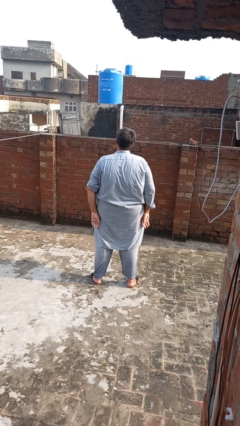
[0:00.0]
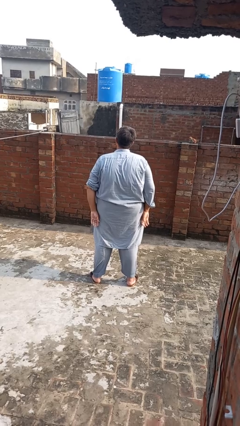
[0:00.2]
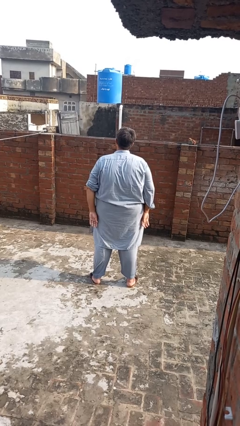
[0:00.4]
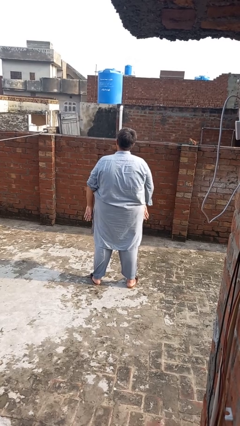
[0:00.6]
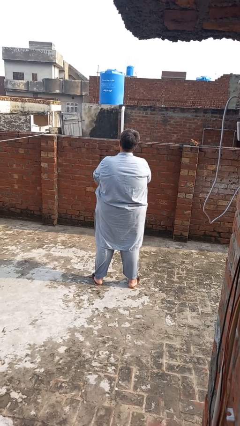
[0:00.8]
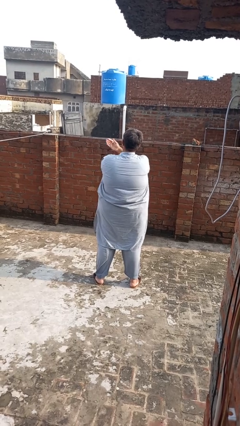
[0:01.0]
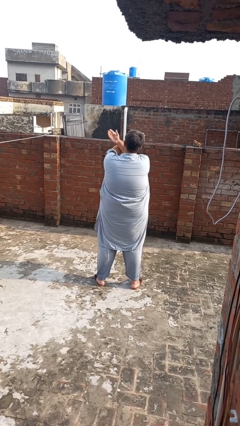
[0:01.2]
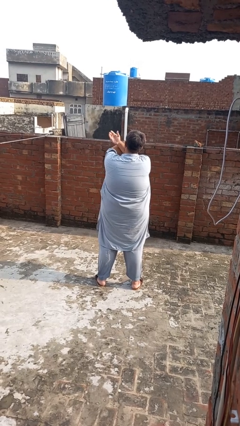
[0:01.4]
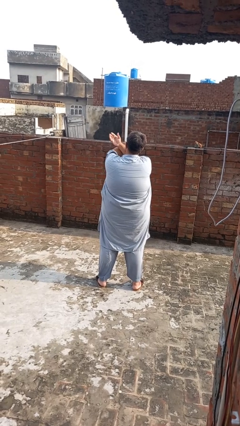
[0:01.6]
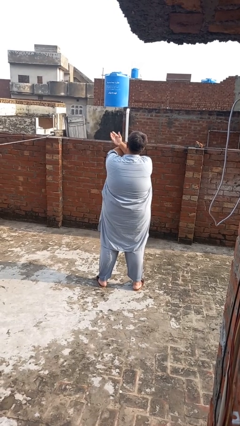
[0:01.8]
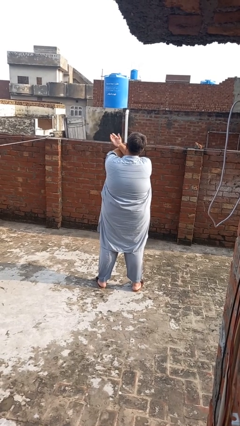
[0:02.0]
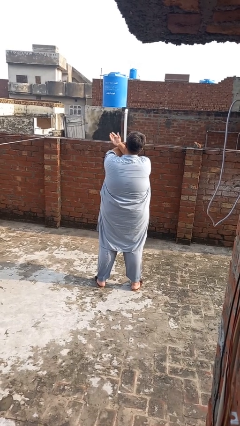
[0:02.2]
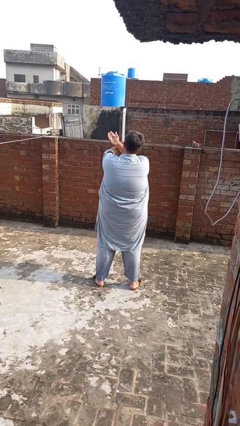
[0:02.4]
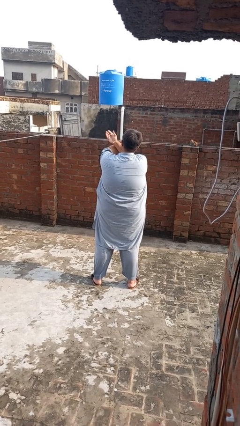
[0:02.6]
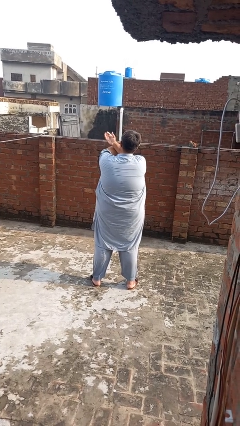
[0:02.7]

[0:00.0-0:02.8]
person gestures arms x

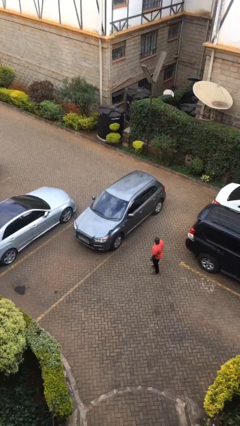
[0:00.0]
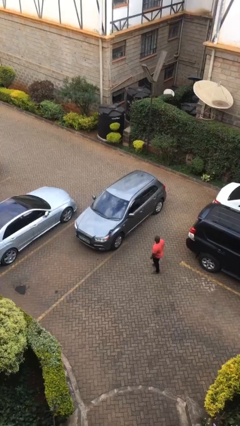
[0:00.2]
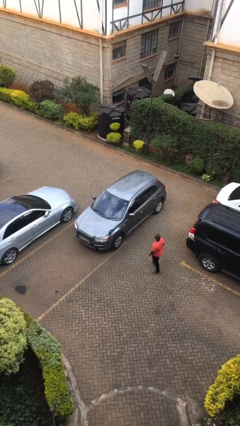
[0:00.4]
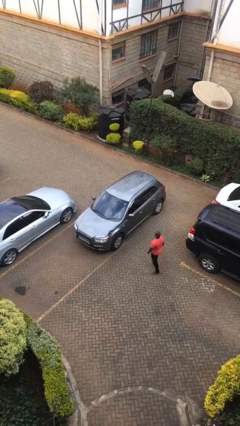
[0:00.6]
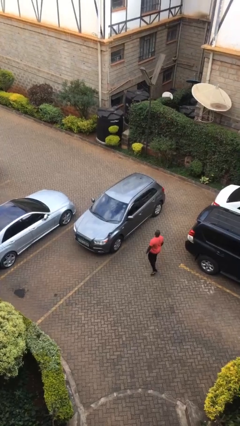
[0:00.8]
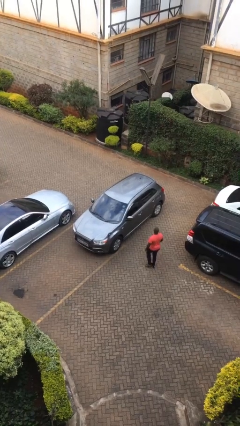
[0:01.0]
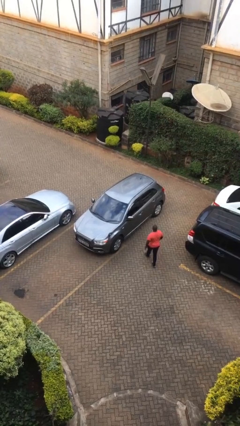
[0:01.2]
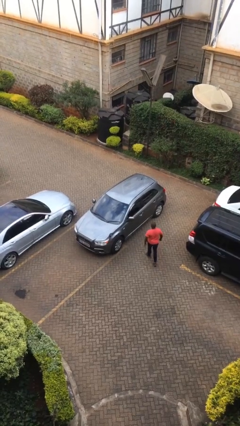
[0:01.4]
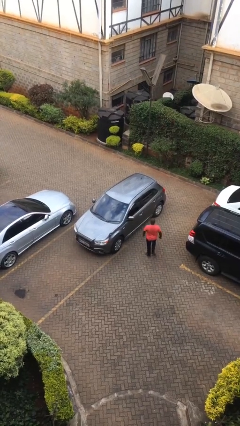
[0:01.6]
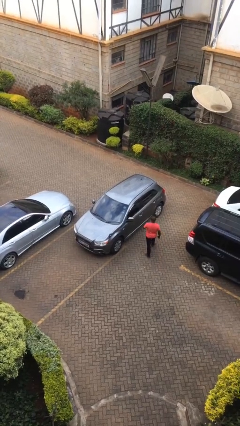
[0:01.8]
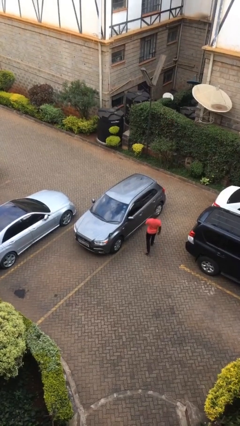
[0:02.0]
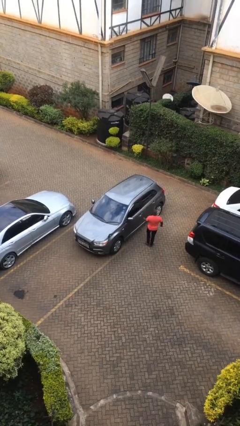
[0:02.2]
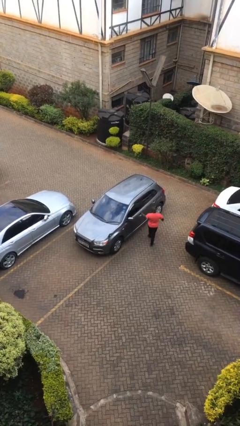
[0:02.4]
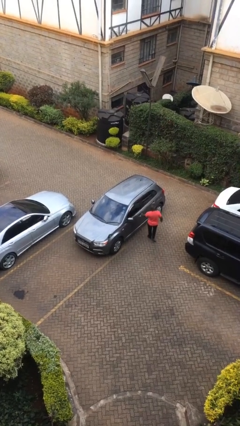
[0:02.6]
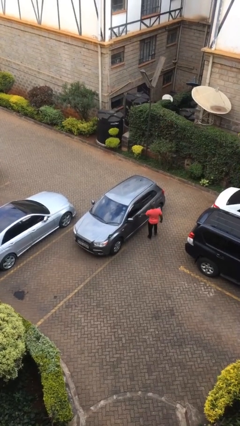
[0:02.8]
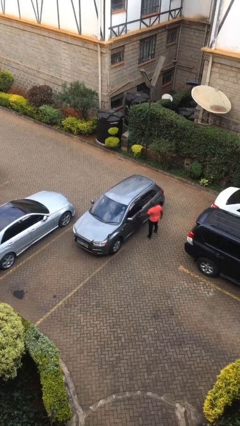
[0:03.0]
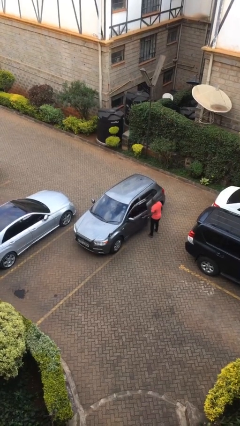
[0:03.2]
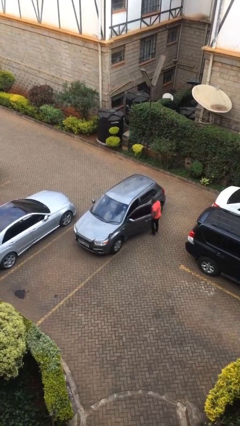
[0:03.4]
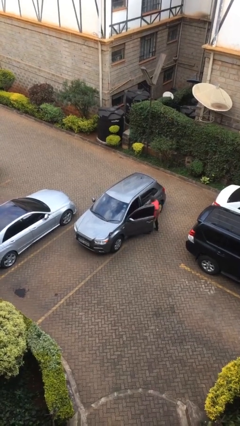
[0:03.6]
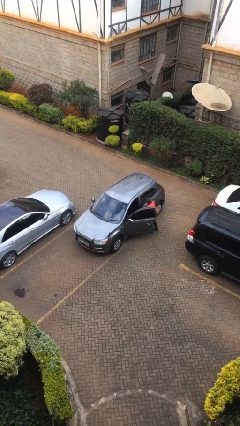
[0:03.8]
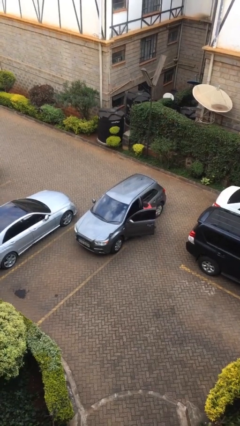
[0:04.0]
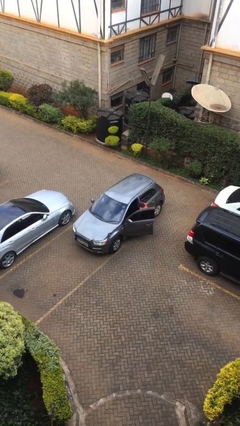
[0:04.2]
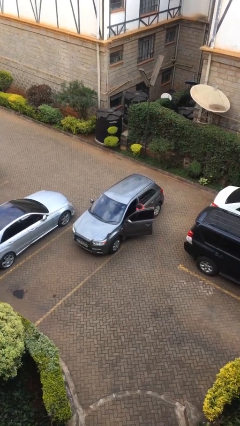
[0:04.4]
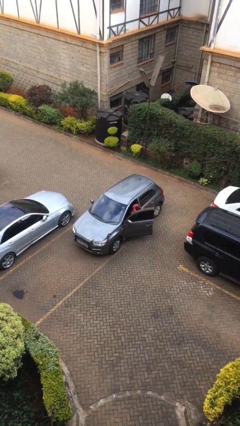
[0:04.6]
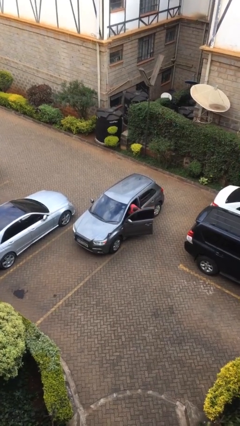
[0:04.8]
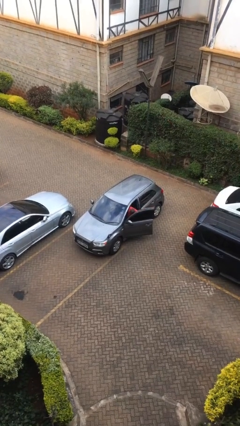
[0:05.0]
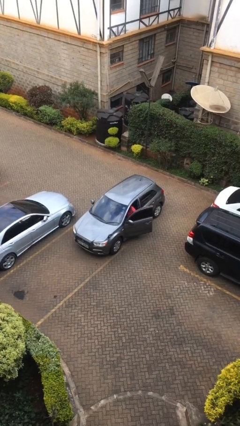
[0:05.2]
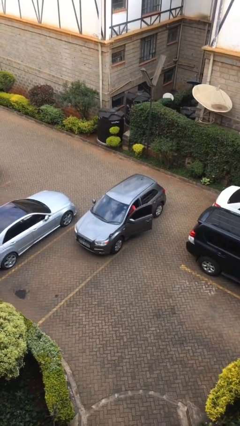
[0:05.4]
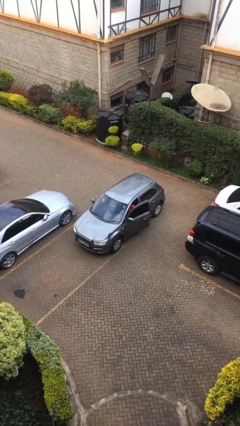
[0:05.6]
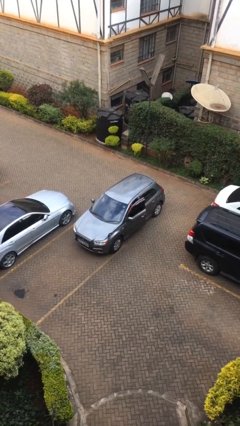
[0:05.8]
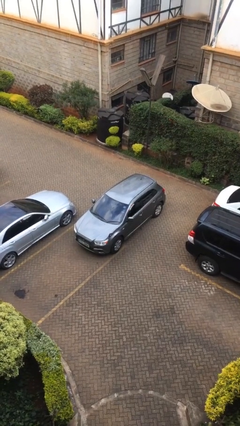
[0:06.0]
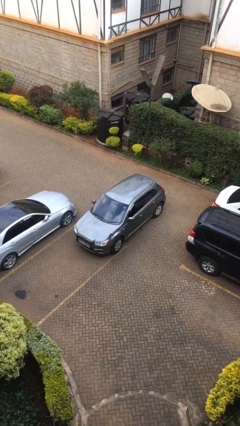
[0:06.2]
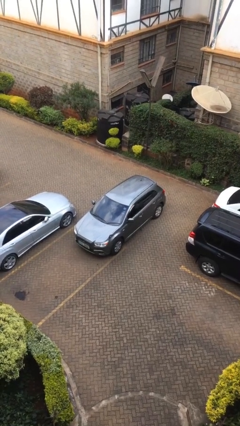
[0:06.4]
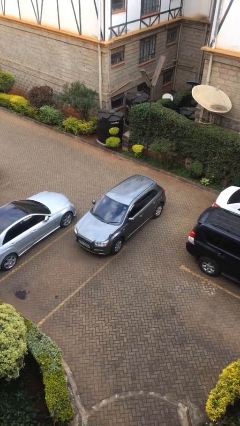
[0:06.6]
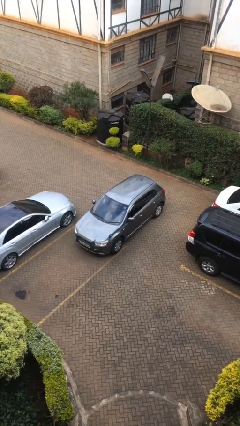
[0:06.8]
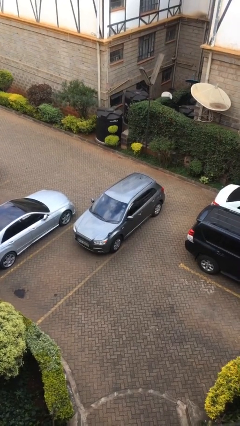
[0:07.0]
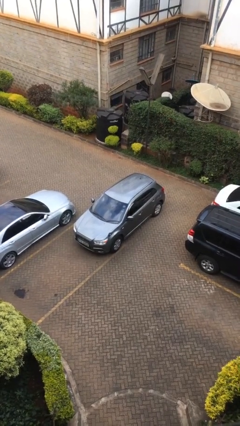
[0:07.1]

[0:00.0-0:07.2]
car picks up person

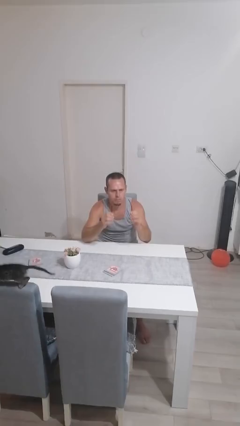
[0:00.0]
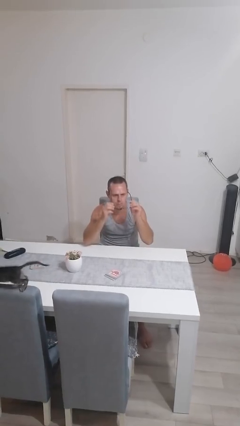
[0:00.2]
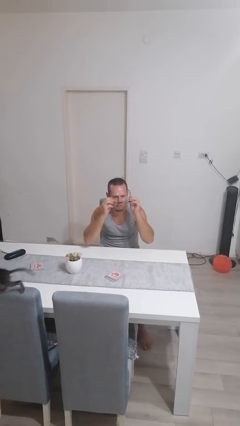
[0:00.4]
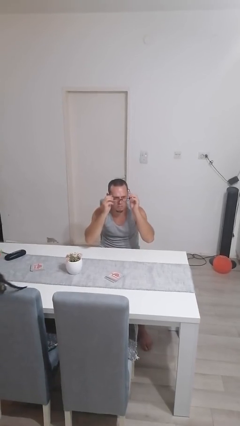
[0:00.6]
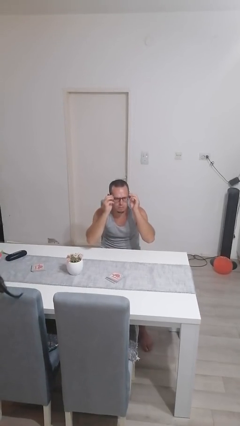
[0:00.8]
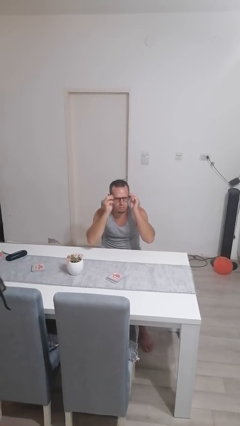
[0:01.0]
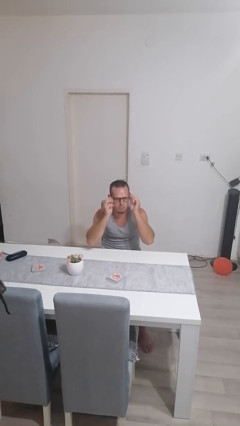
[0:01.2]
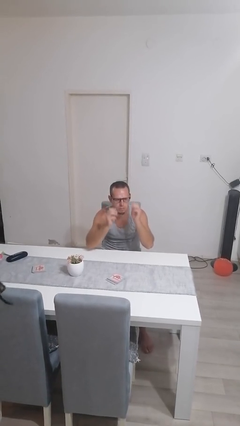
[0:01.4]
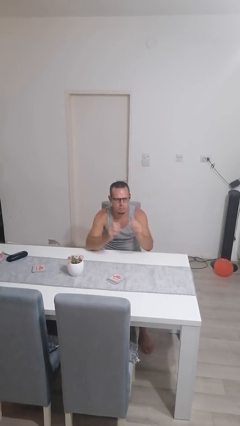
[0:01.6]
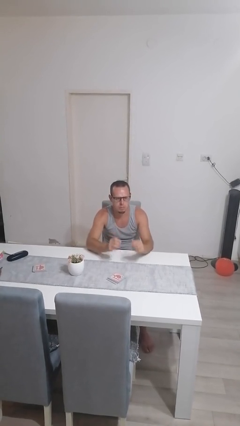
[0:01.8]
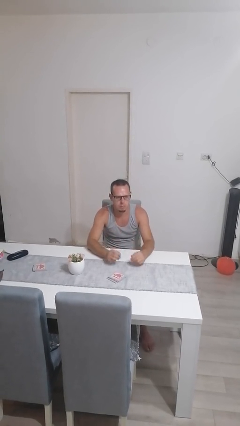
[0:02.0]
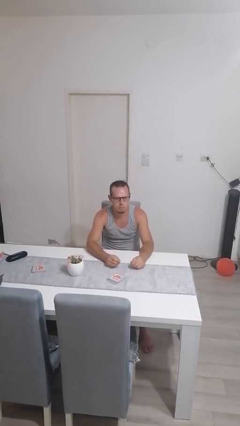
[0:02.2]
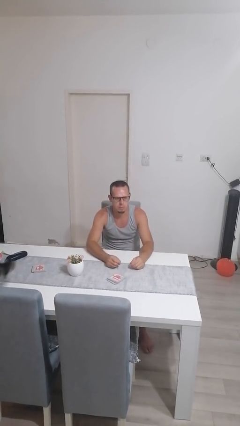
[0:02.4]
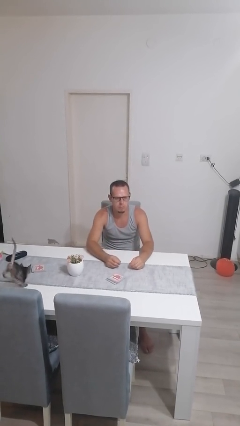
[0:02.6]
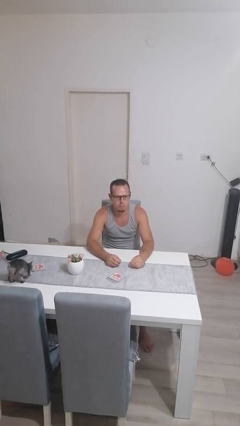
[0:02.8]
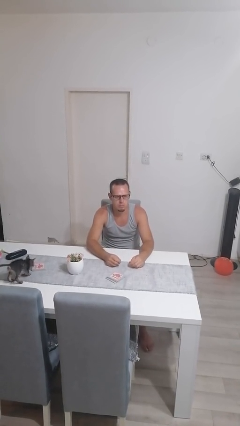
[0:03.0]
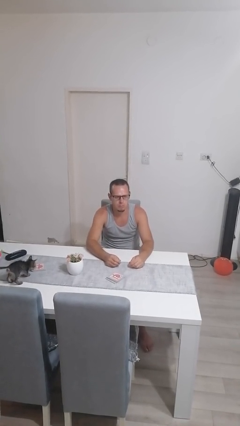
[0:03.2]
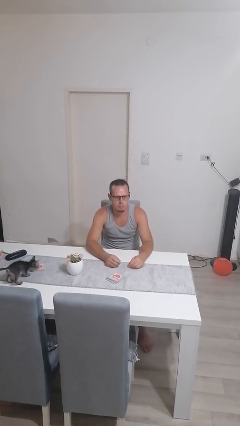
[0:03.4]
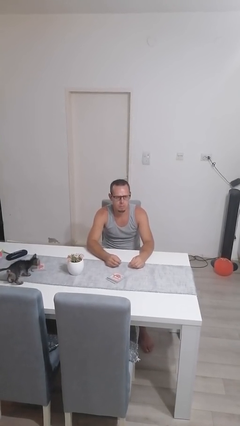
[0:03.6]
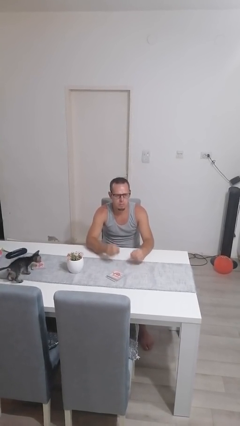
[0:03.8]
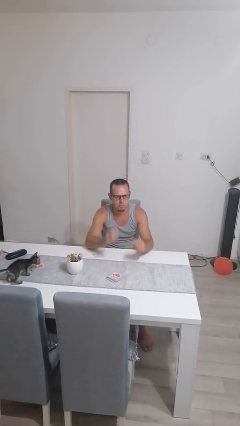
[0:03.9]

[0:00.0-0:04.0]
person puts on glasses

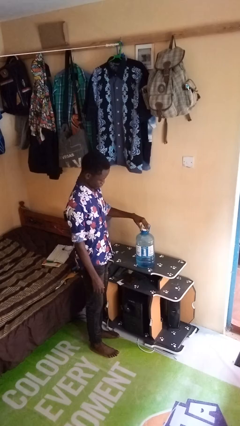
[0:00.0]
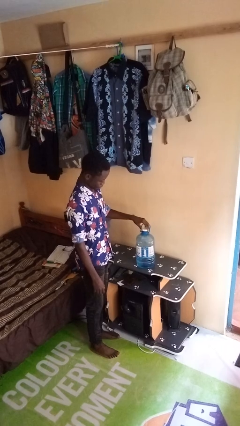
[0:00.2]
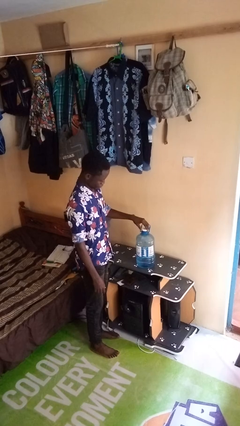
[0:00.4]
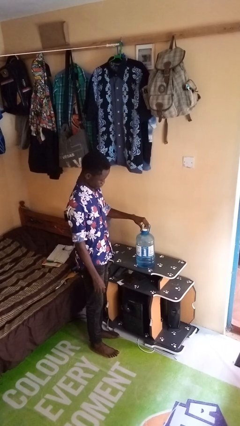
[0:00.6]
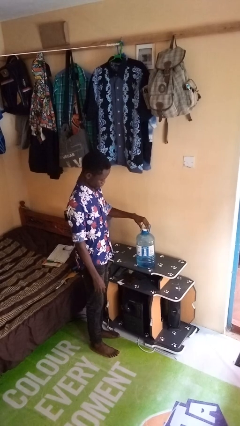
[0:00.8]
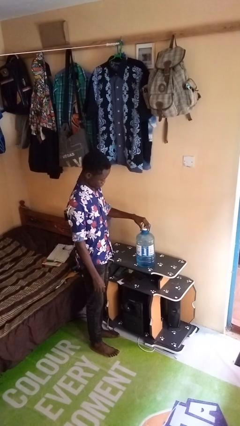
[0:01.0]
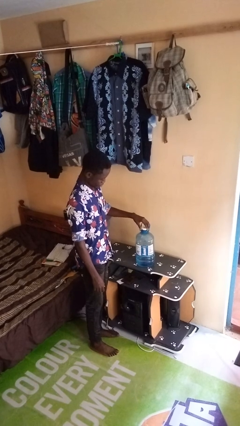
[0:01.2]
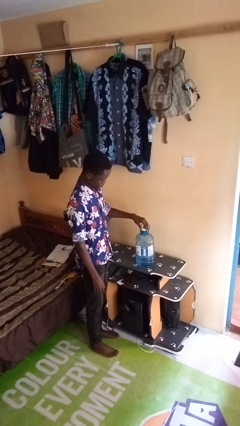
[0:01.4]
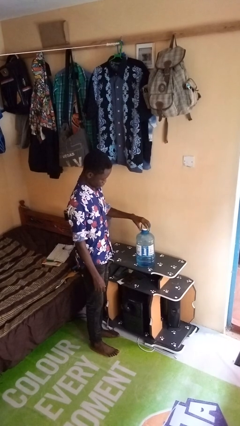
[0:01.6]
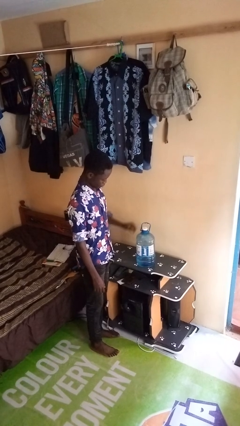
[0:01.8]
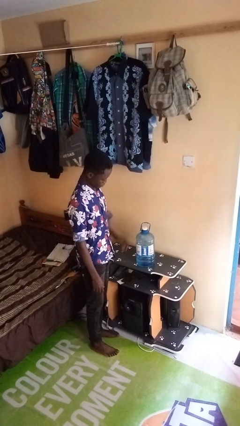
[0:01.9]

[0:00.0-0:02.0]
person screws lid to bottle

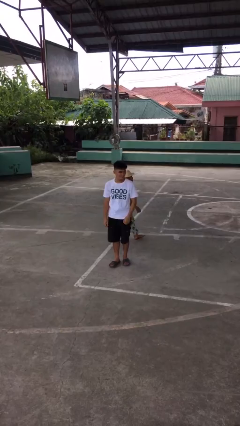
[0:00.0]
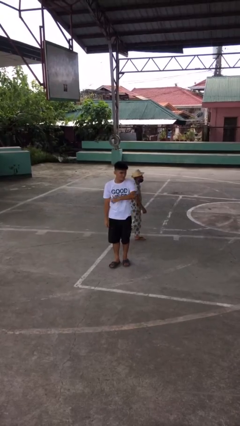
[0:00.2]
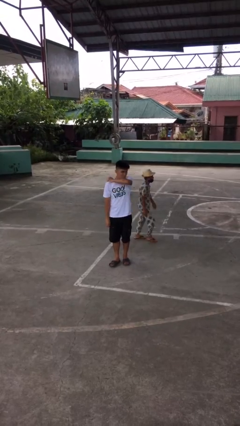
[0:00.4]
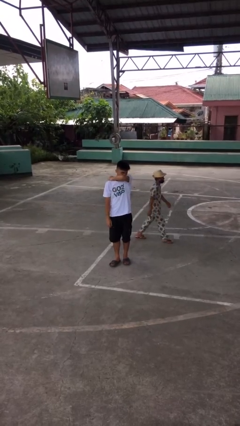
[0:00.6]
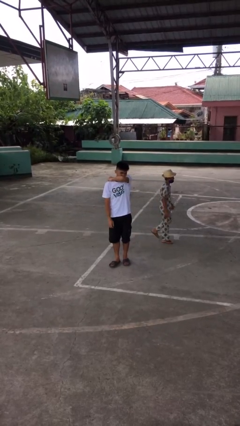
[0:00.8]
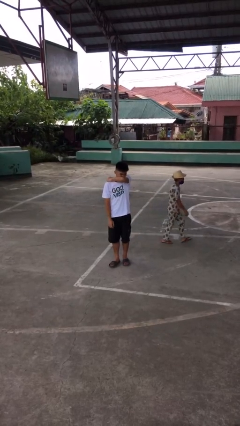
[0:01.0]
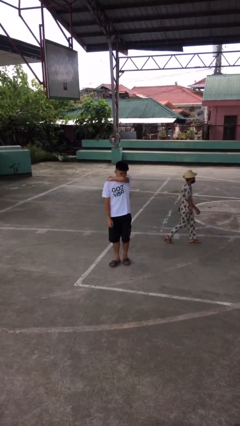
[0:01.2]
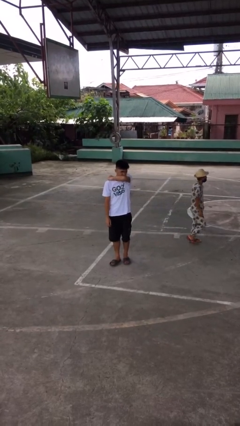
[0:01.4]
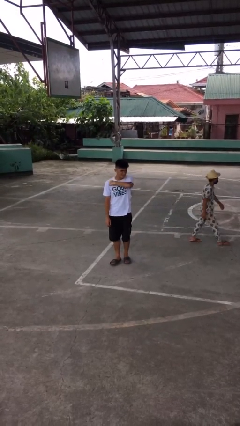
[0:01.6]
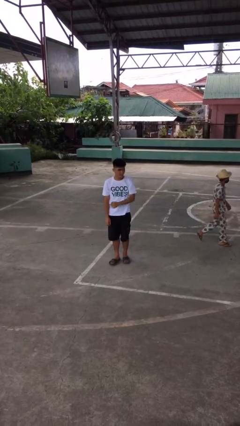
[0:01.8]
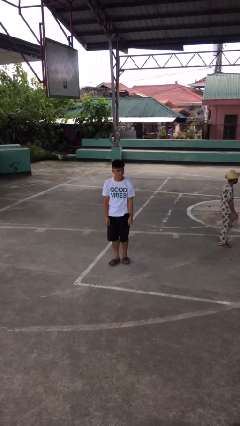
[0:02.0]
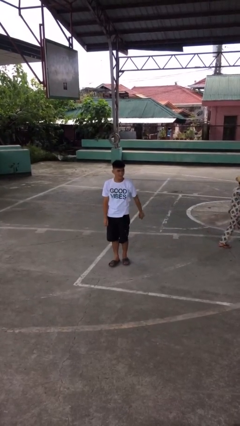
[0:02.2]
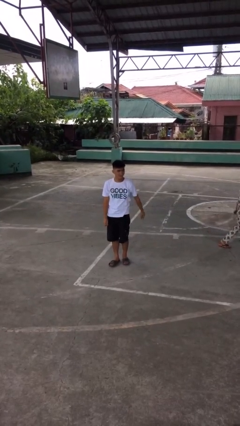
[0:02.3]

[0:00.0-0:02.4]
person sneezes into arm
